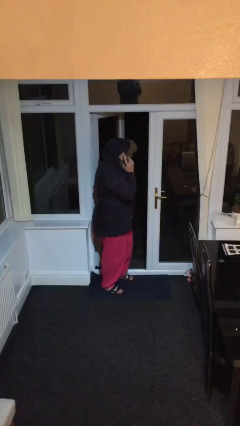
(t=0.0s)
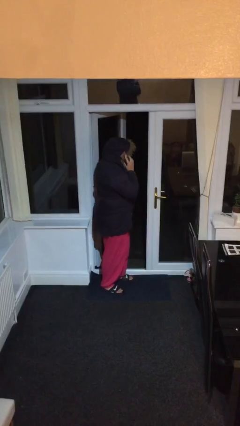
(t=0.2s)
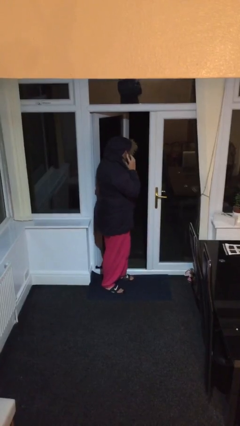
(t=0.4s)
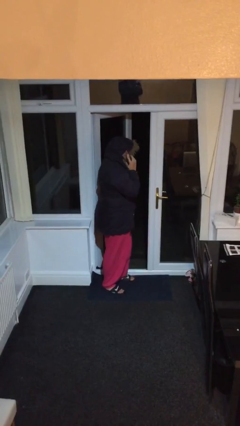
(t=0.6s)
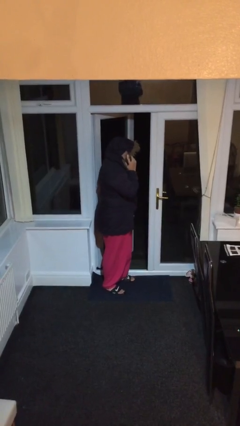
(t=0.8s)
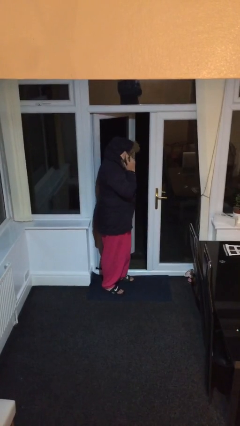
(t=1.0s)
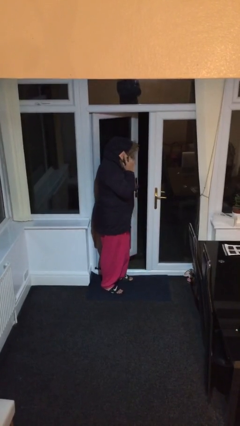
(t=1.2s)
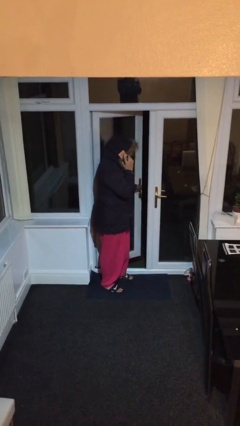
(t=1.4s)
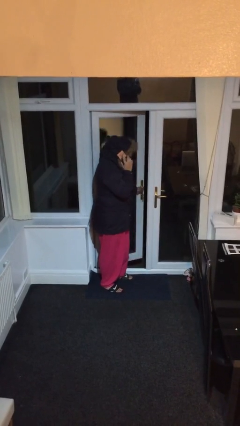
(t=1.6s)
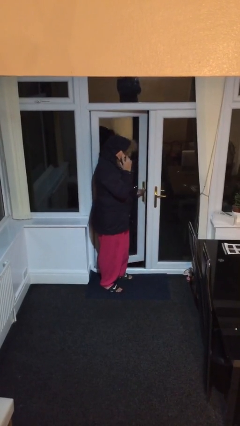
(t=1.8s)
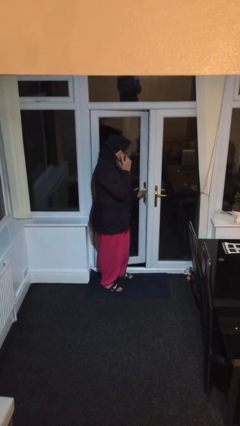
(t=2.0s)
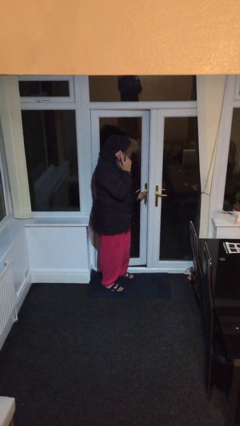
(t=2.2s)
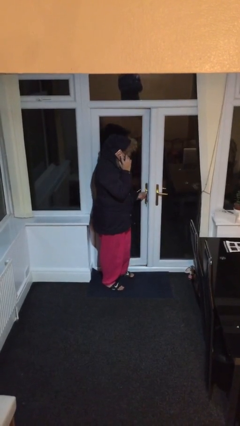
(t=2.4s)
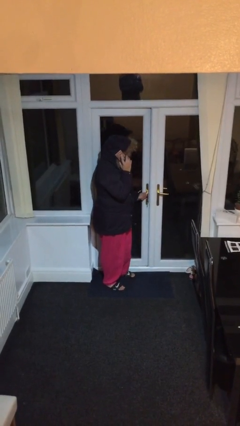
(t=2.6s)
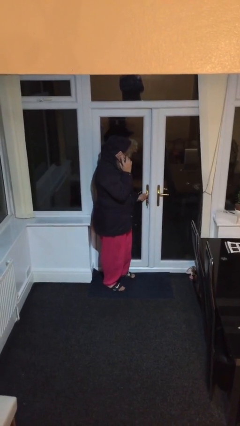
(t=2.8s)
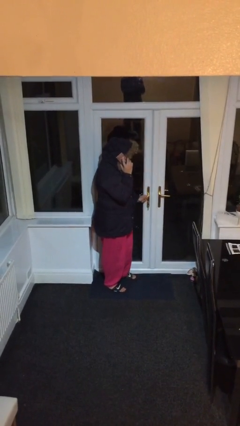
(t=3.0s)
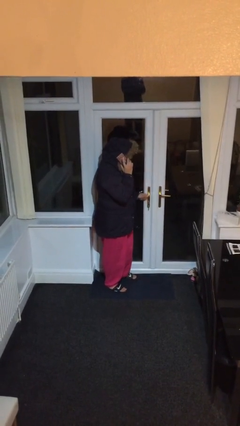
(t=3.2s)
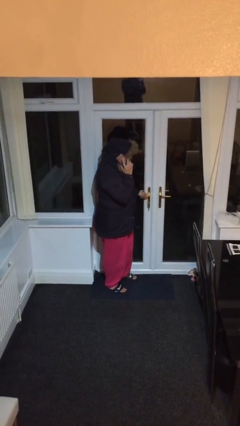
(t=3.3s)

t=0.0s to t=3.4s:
person closes facility door

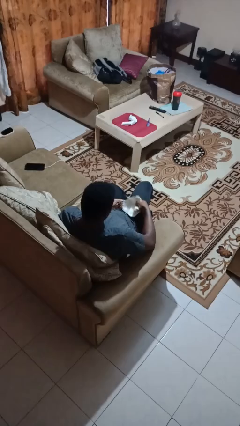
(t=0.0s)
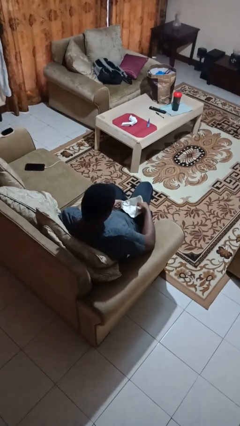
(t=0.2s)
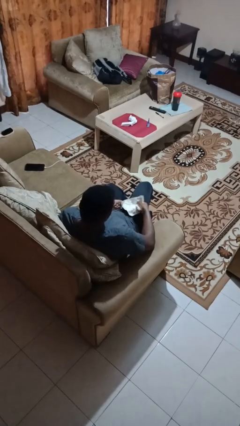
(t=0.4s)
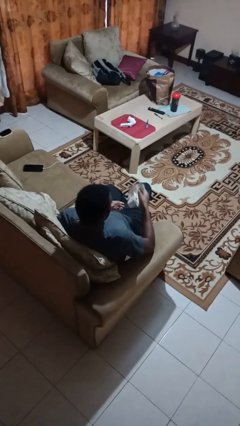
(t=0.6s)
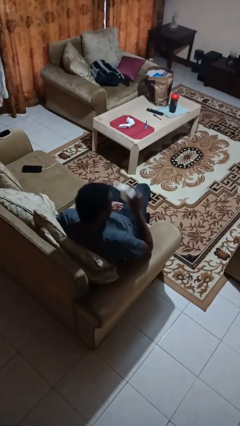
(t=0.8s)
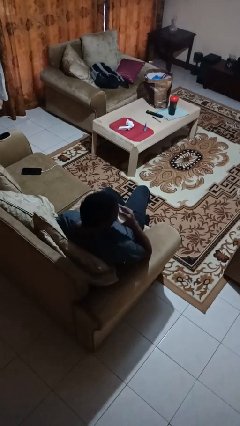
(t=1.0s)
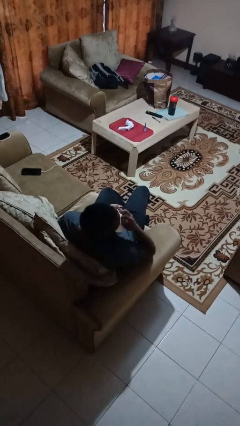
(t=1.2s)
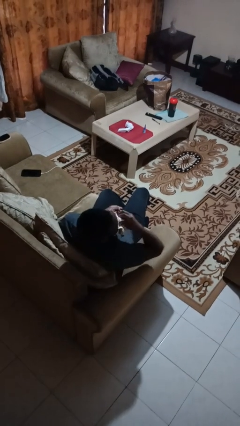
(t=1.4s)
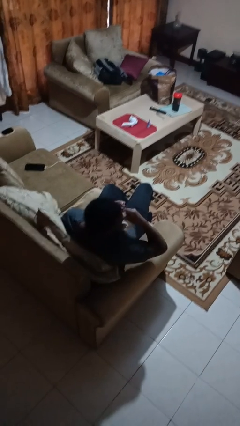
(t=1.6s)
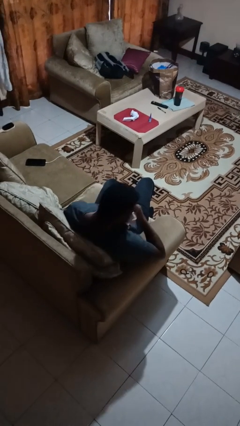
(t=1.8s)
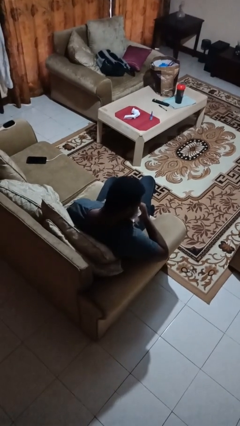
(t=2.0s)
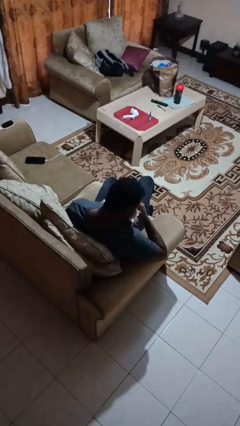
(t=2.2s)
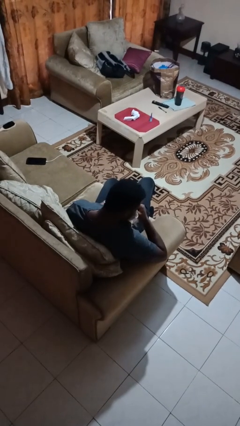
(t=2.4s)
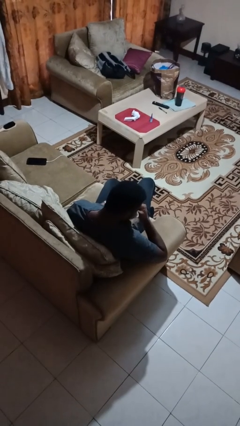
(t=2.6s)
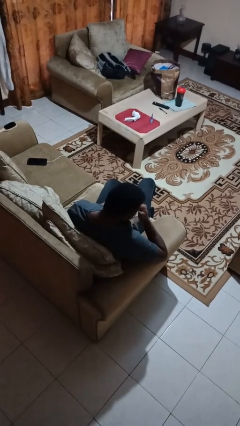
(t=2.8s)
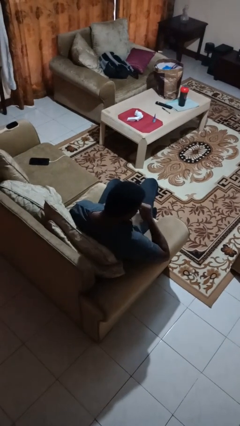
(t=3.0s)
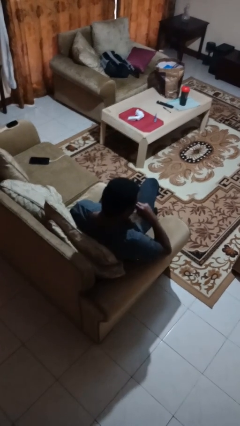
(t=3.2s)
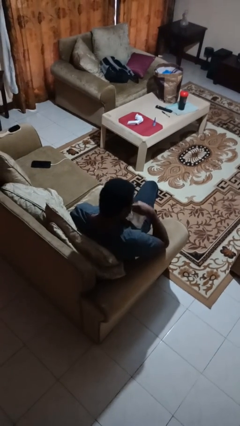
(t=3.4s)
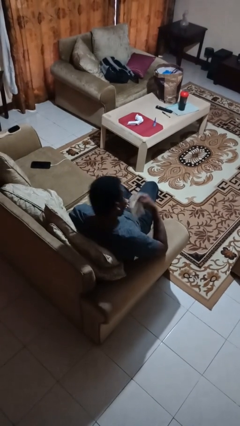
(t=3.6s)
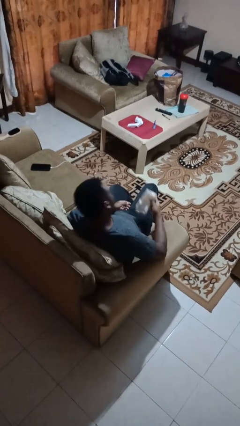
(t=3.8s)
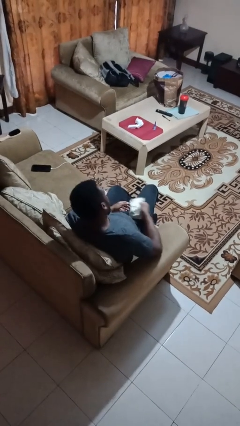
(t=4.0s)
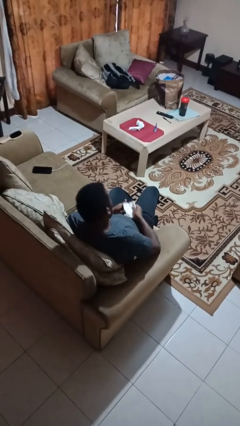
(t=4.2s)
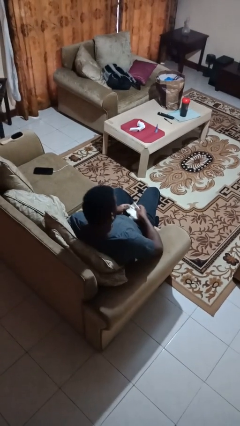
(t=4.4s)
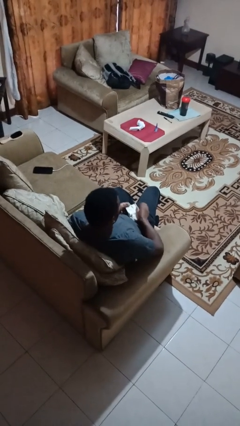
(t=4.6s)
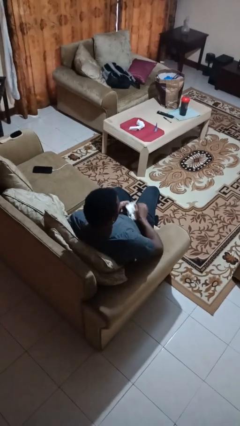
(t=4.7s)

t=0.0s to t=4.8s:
person blows nose

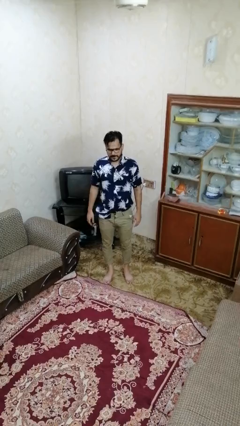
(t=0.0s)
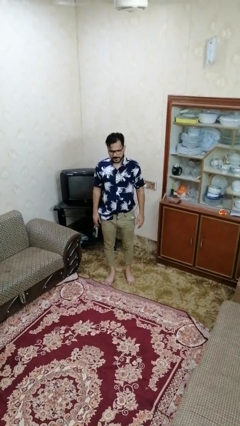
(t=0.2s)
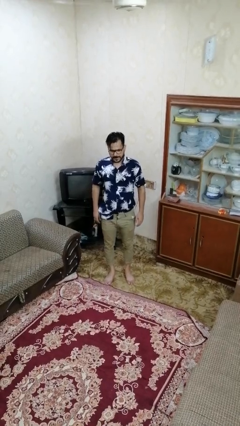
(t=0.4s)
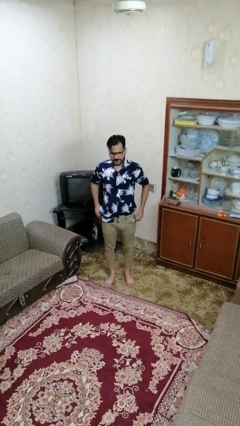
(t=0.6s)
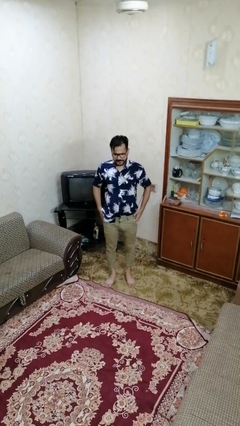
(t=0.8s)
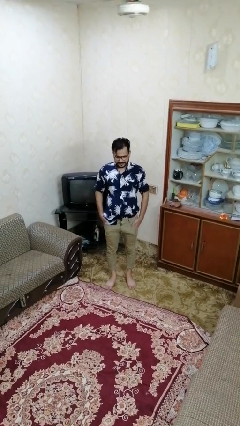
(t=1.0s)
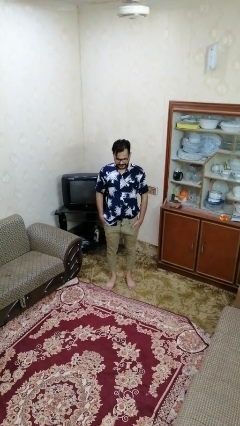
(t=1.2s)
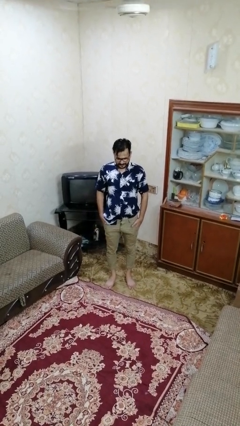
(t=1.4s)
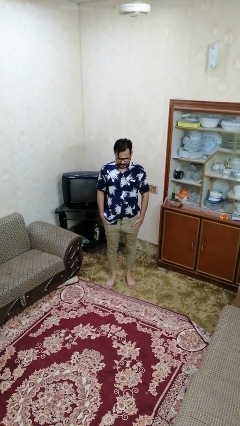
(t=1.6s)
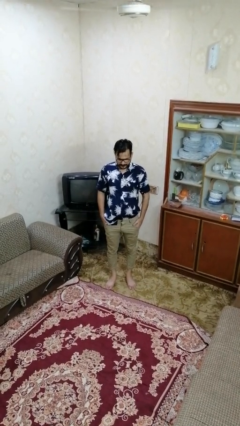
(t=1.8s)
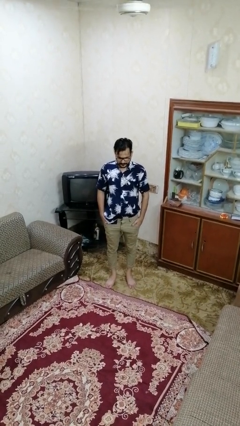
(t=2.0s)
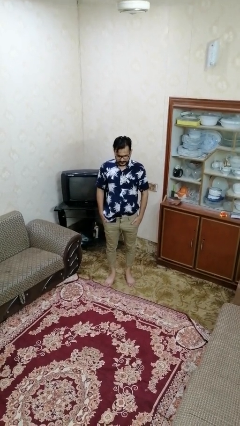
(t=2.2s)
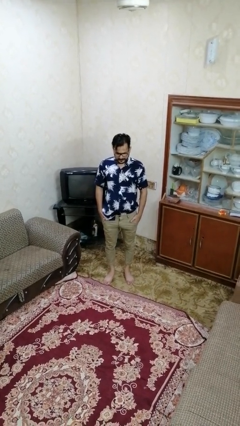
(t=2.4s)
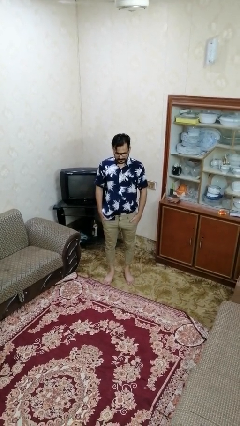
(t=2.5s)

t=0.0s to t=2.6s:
person puts hands in back pockets

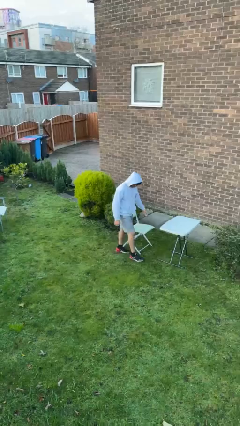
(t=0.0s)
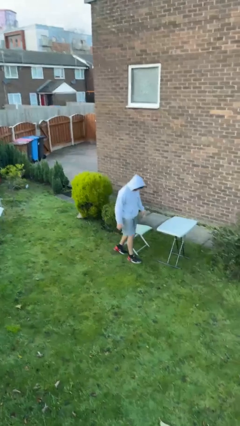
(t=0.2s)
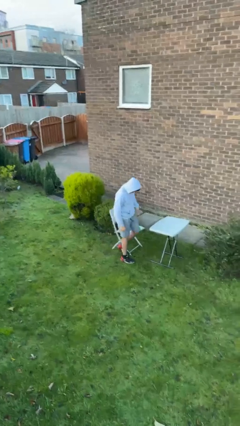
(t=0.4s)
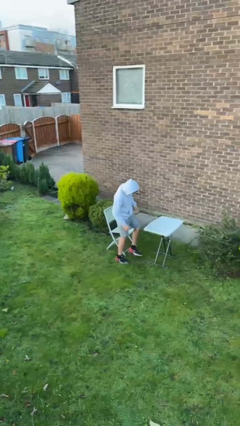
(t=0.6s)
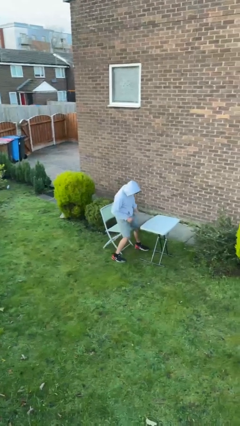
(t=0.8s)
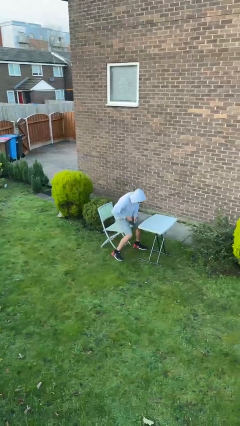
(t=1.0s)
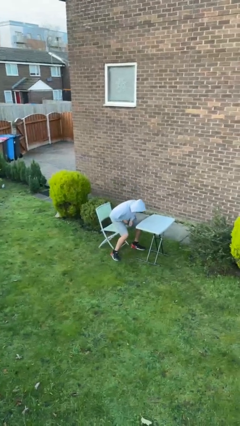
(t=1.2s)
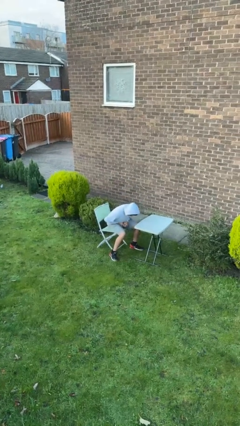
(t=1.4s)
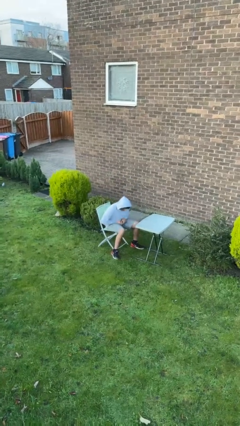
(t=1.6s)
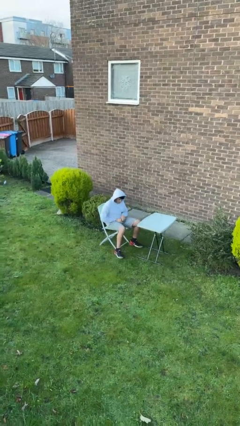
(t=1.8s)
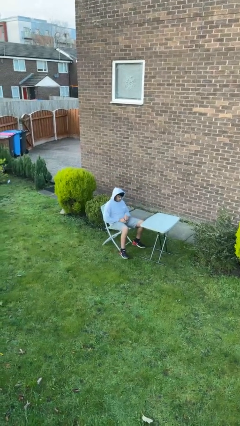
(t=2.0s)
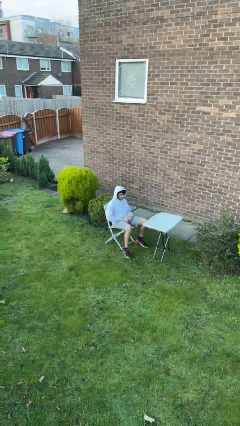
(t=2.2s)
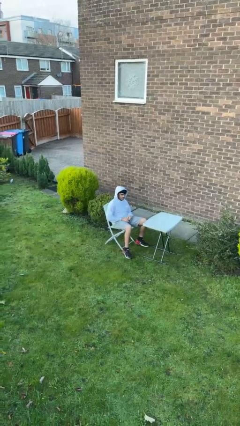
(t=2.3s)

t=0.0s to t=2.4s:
person sits down

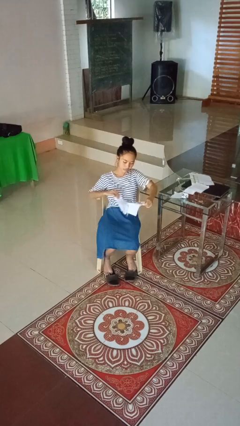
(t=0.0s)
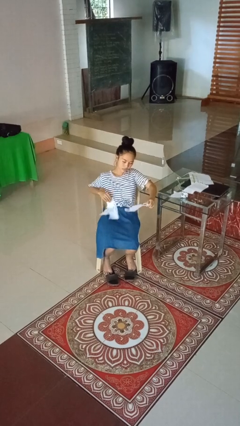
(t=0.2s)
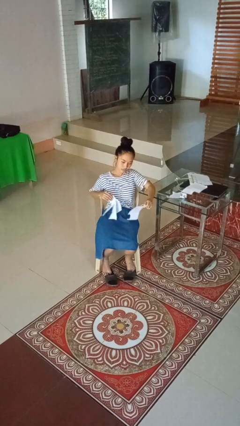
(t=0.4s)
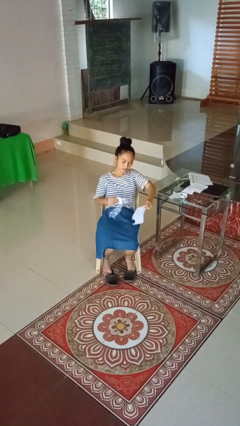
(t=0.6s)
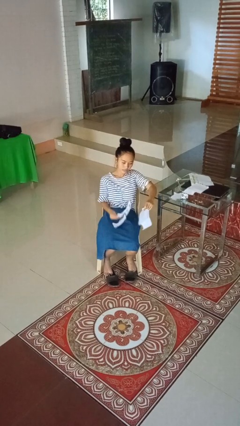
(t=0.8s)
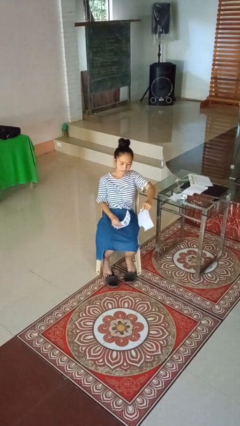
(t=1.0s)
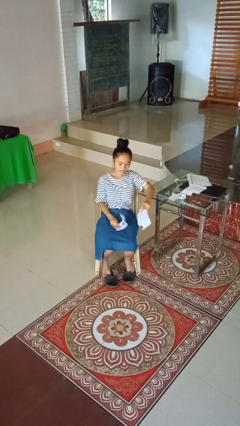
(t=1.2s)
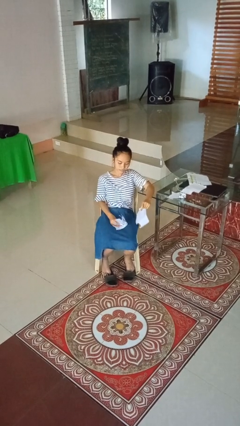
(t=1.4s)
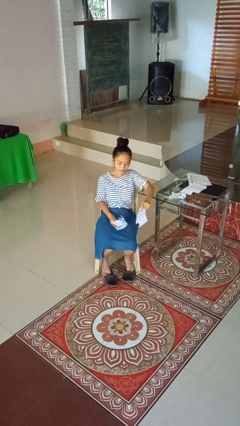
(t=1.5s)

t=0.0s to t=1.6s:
person tears paper

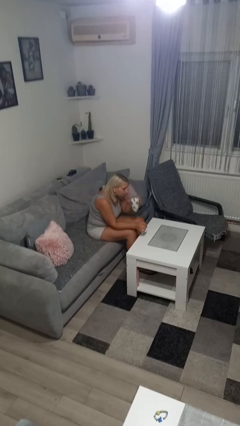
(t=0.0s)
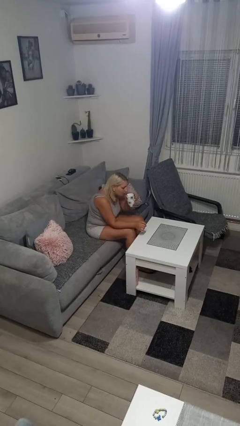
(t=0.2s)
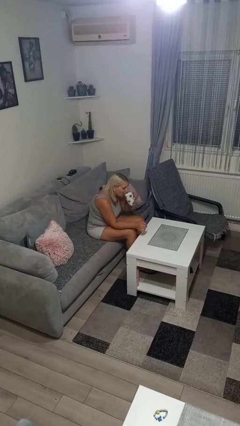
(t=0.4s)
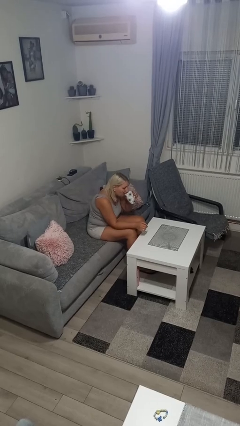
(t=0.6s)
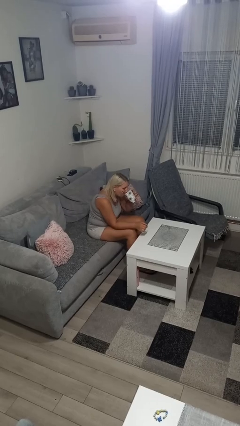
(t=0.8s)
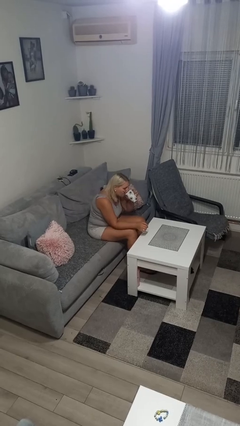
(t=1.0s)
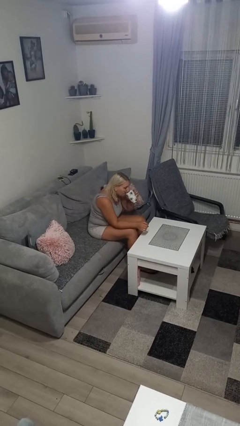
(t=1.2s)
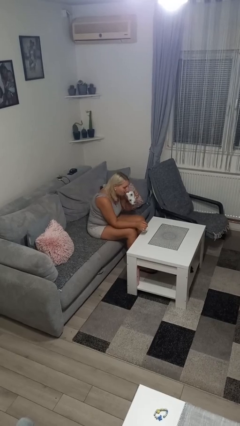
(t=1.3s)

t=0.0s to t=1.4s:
person drinks from mug

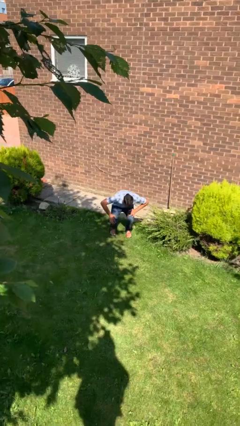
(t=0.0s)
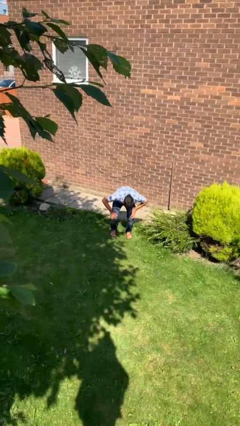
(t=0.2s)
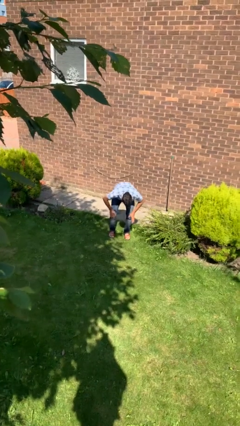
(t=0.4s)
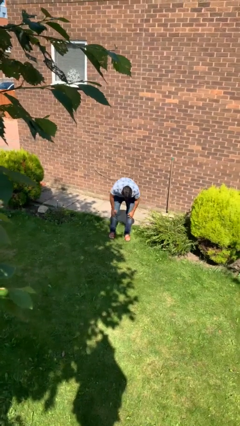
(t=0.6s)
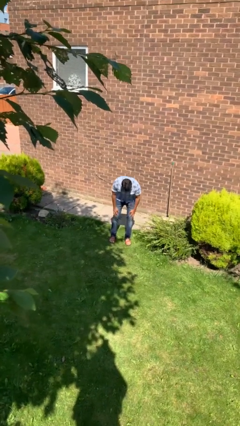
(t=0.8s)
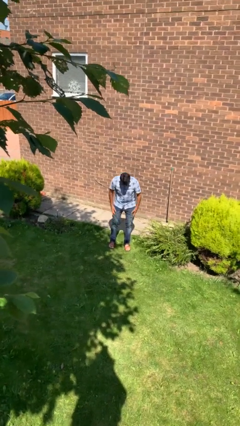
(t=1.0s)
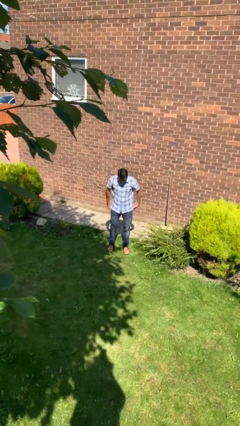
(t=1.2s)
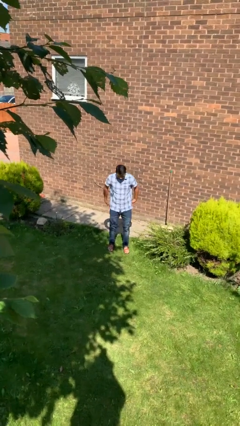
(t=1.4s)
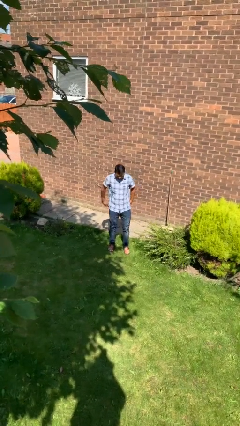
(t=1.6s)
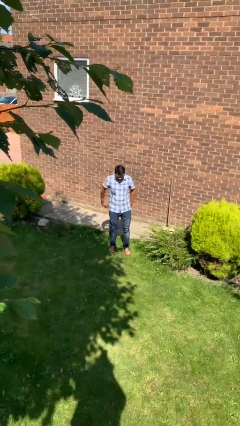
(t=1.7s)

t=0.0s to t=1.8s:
person stands up from floor
